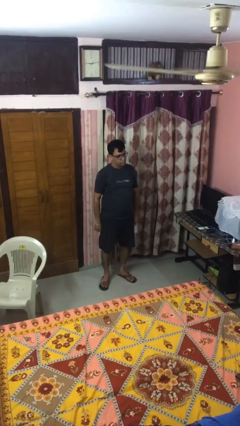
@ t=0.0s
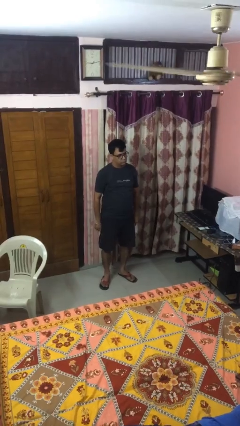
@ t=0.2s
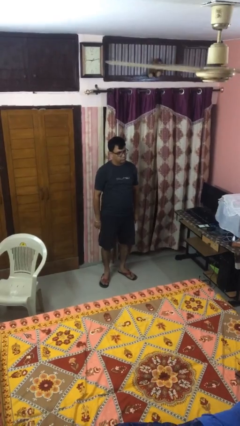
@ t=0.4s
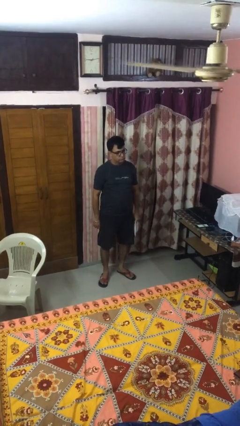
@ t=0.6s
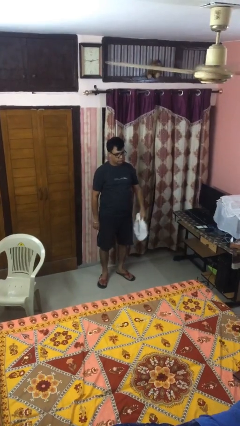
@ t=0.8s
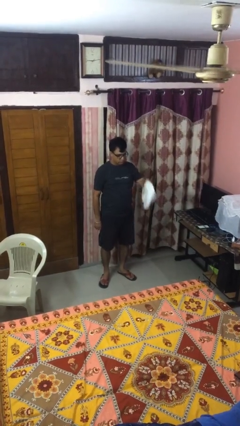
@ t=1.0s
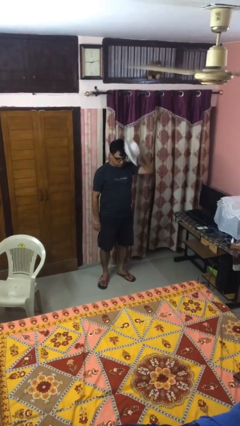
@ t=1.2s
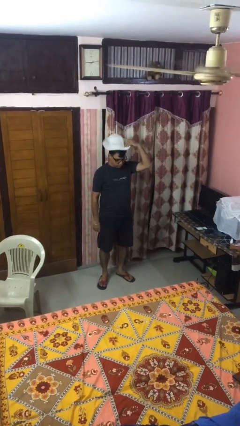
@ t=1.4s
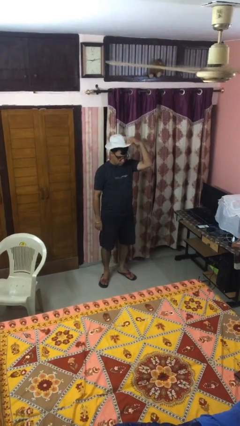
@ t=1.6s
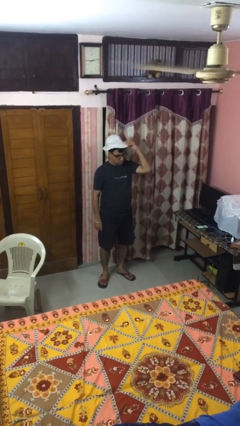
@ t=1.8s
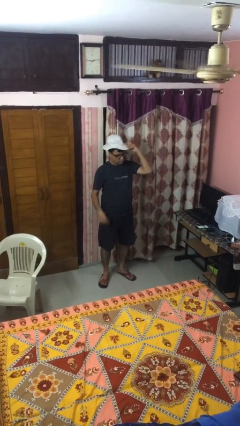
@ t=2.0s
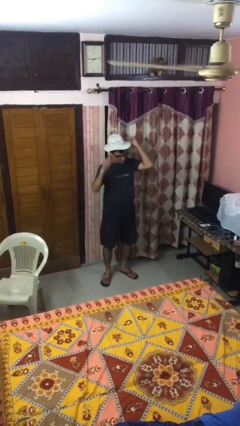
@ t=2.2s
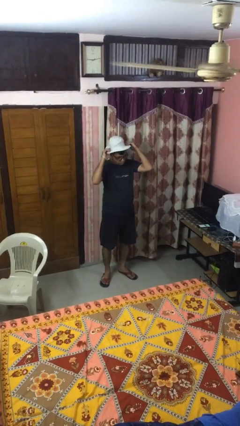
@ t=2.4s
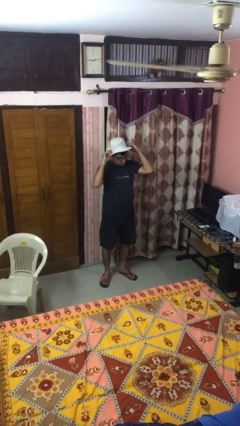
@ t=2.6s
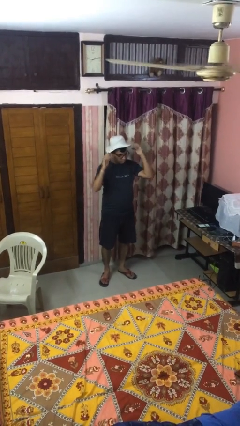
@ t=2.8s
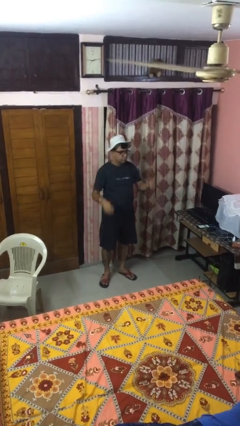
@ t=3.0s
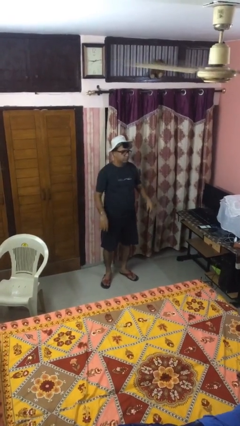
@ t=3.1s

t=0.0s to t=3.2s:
person puts on hat

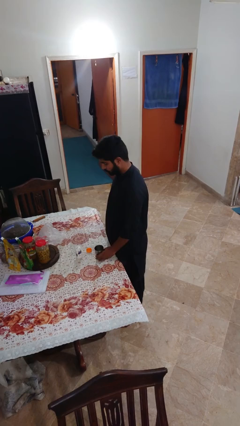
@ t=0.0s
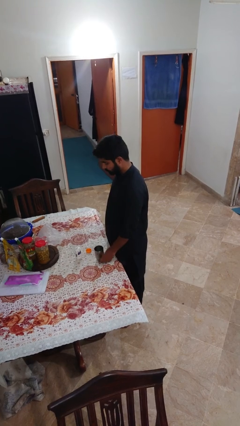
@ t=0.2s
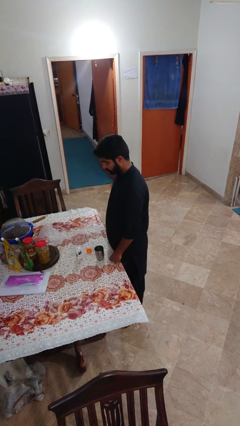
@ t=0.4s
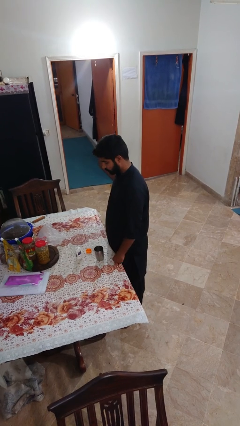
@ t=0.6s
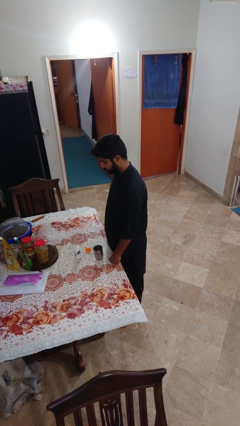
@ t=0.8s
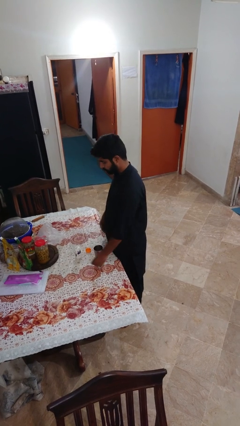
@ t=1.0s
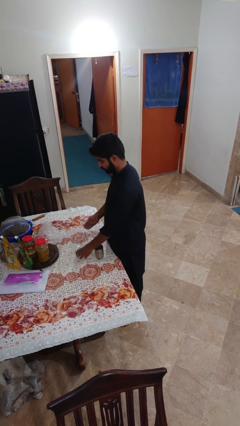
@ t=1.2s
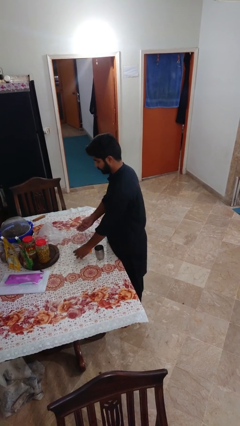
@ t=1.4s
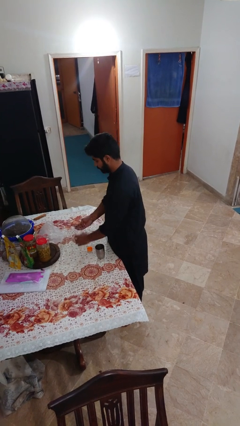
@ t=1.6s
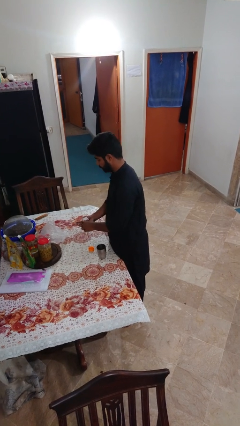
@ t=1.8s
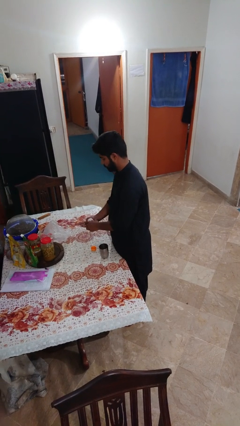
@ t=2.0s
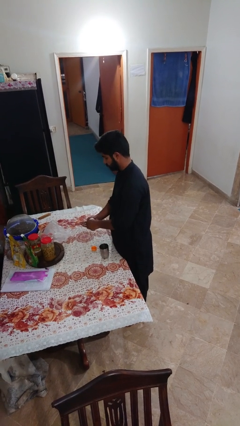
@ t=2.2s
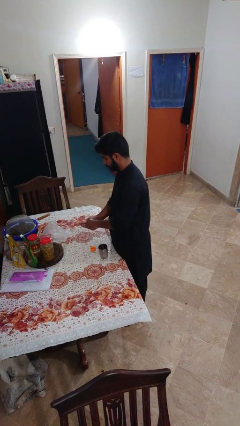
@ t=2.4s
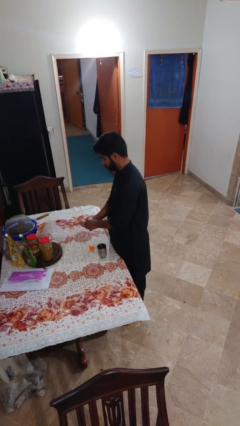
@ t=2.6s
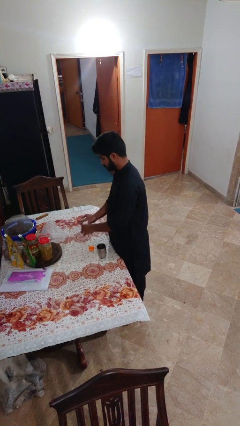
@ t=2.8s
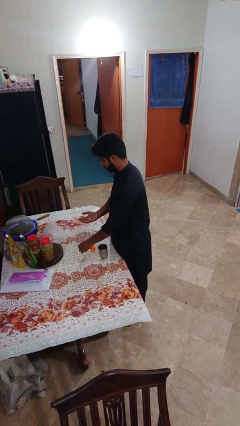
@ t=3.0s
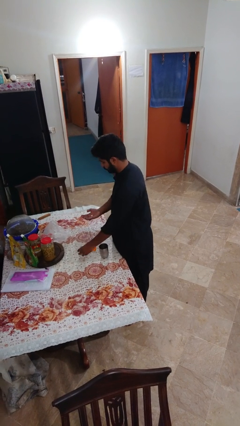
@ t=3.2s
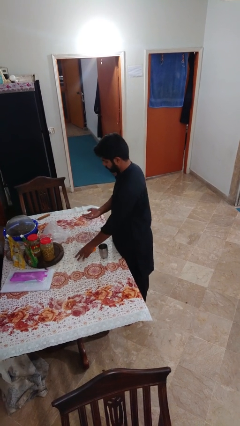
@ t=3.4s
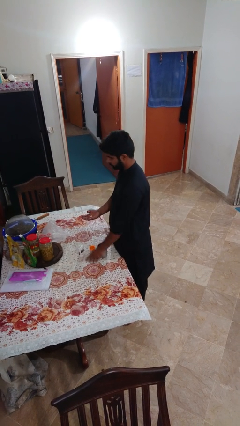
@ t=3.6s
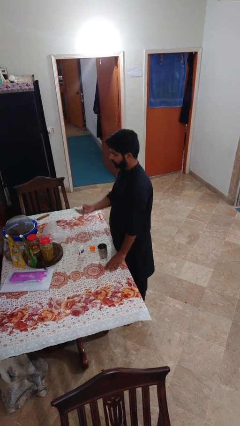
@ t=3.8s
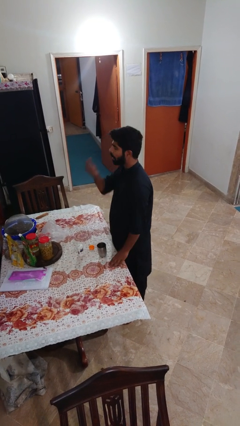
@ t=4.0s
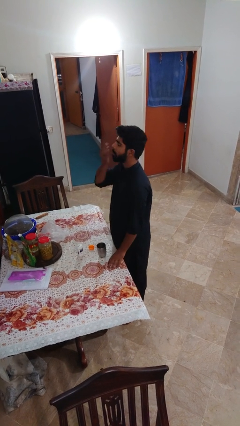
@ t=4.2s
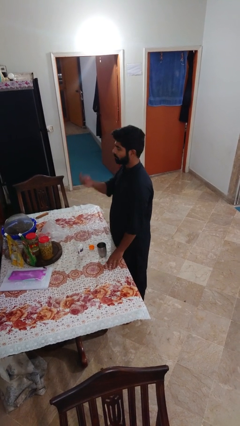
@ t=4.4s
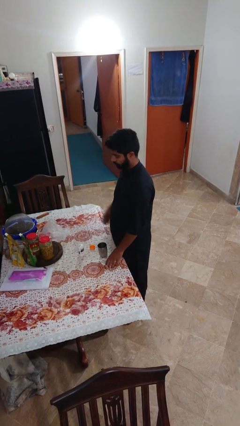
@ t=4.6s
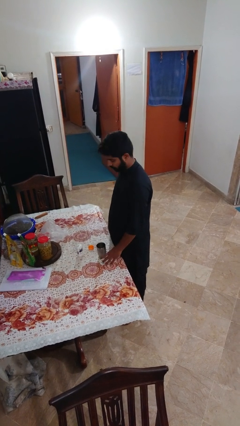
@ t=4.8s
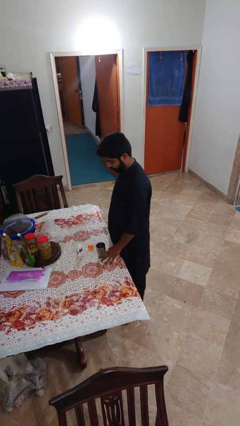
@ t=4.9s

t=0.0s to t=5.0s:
person takes medicine pills

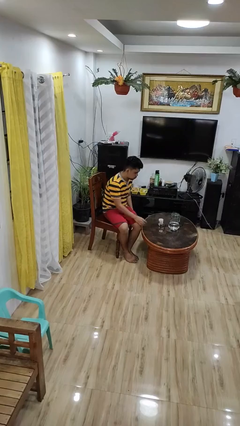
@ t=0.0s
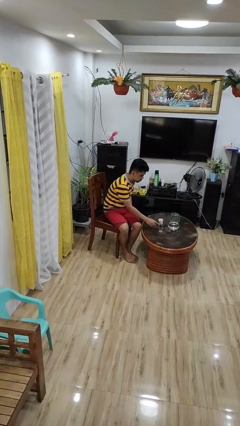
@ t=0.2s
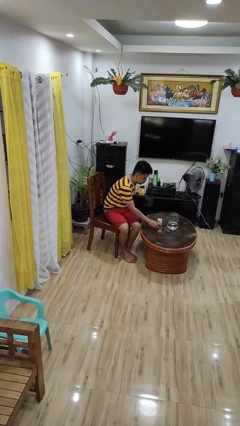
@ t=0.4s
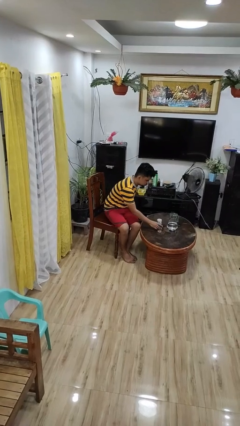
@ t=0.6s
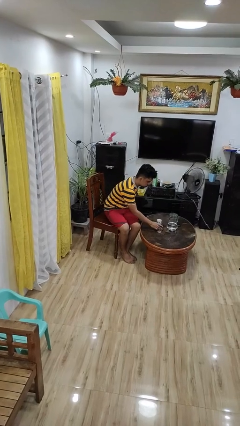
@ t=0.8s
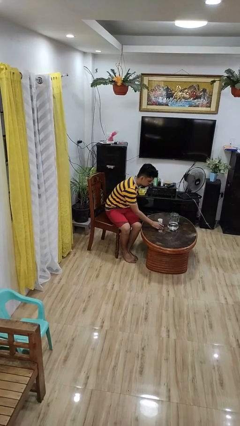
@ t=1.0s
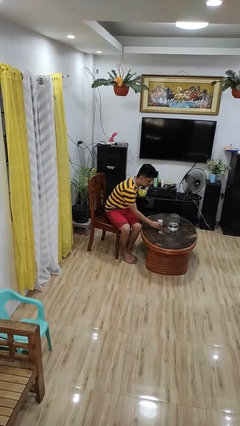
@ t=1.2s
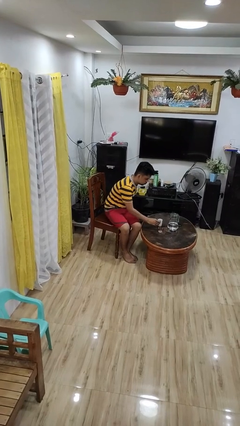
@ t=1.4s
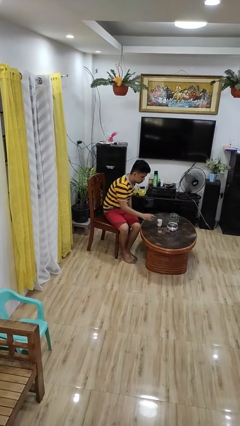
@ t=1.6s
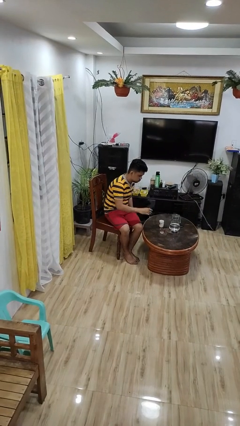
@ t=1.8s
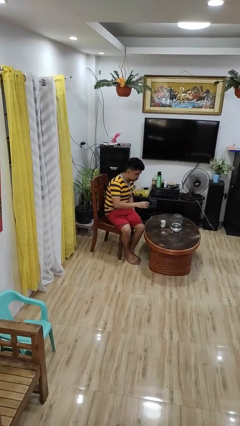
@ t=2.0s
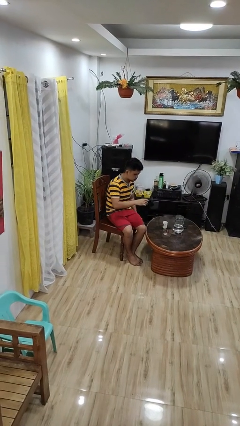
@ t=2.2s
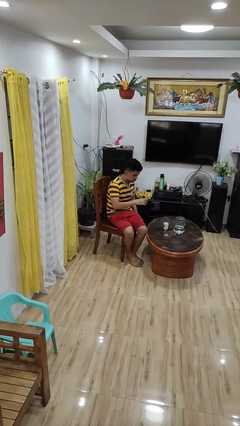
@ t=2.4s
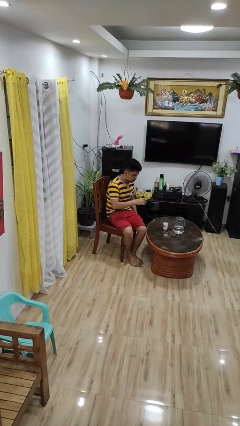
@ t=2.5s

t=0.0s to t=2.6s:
person picks up object from table

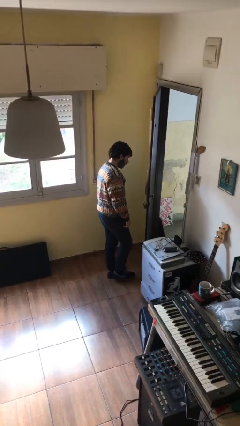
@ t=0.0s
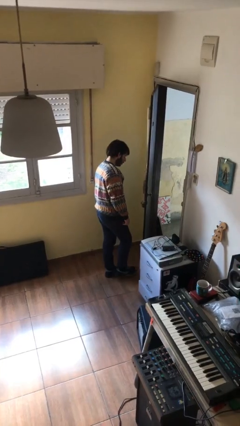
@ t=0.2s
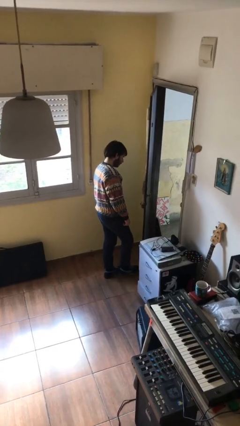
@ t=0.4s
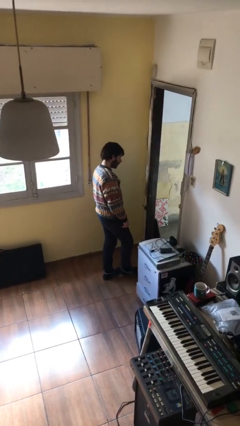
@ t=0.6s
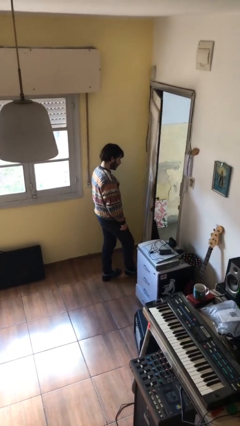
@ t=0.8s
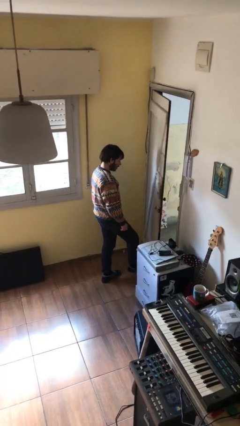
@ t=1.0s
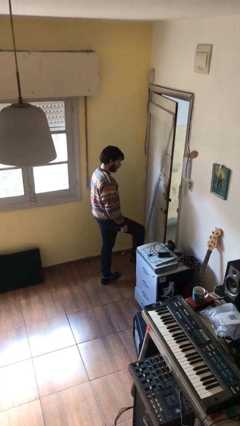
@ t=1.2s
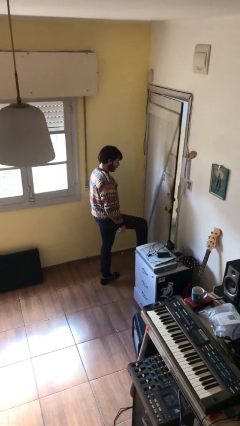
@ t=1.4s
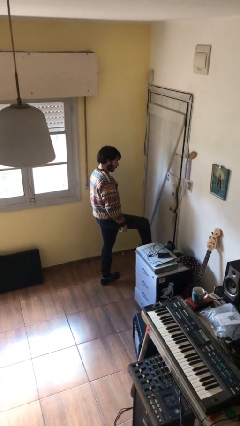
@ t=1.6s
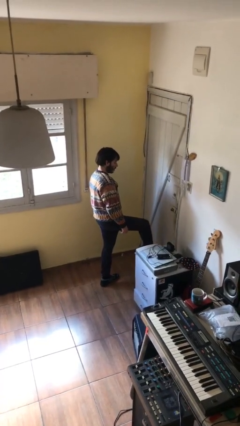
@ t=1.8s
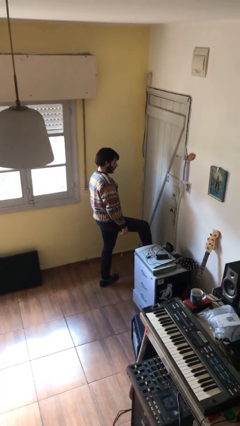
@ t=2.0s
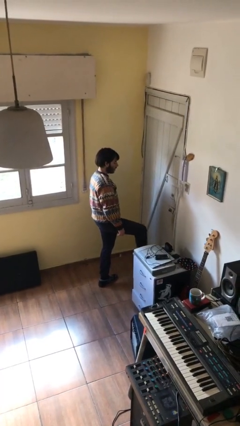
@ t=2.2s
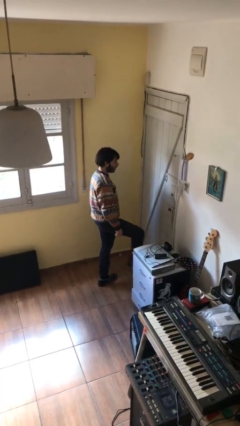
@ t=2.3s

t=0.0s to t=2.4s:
person closes door with foot

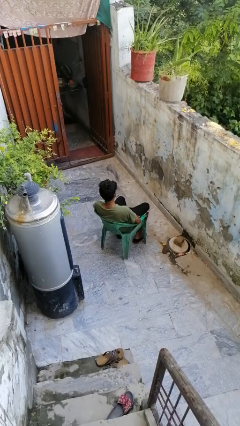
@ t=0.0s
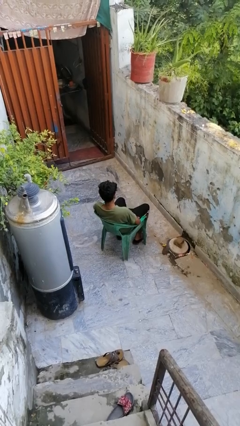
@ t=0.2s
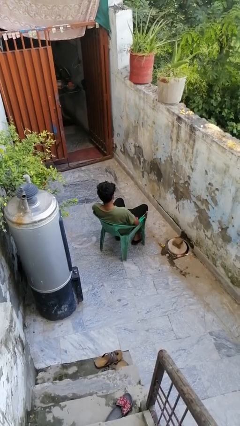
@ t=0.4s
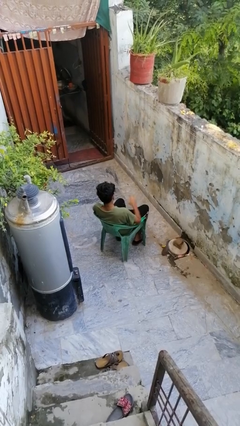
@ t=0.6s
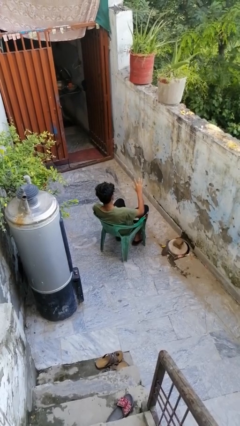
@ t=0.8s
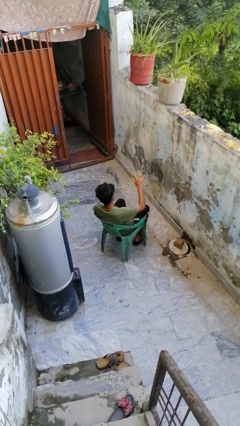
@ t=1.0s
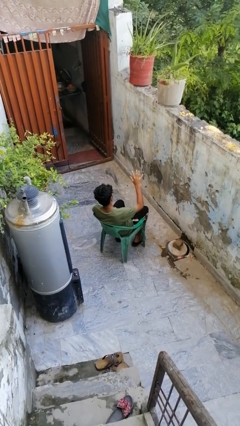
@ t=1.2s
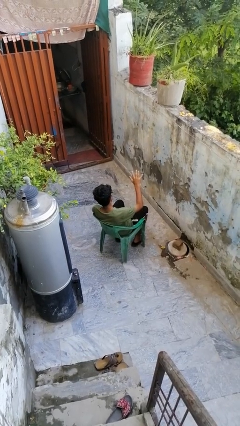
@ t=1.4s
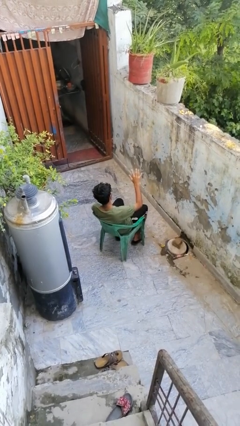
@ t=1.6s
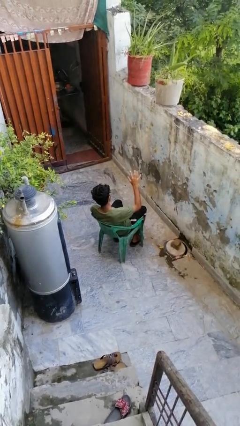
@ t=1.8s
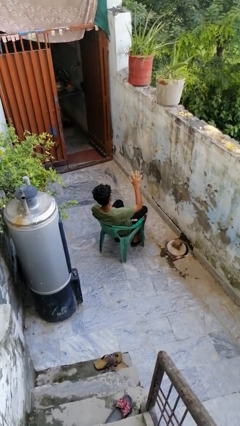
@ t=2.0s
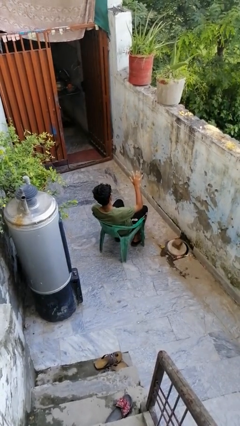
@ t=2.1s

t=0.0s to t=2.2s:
person gestures number five

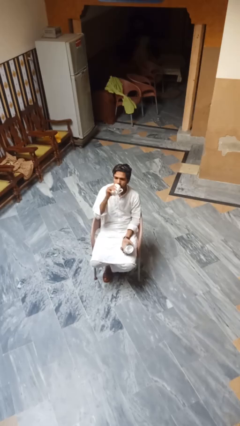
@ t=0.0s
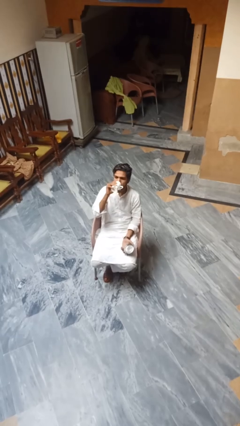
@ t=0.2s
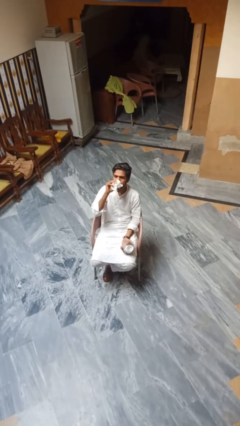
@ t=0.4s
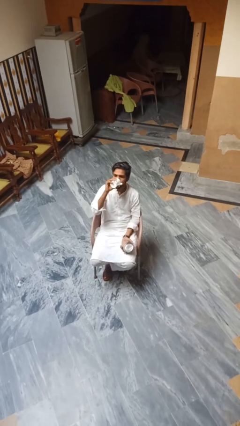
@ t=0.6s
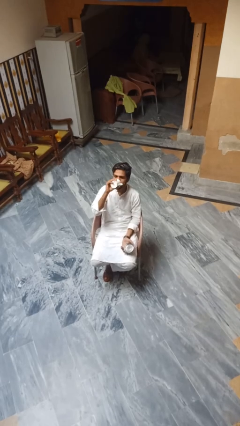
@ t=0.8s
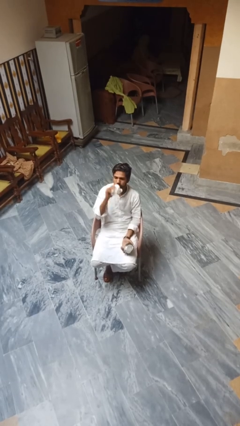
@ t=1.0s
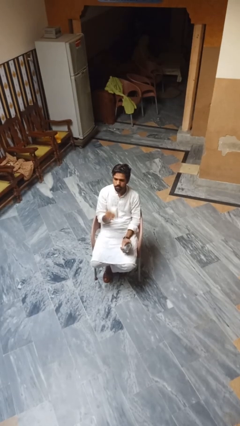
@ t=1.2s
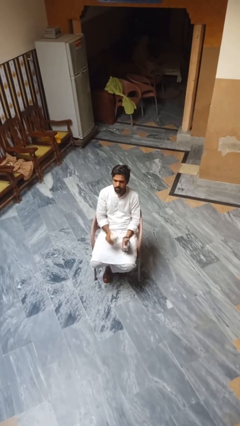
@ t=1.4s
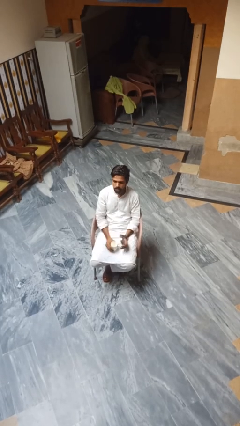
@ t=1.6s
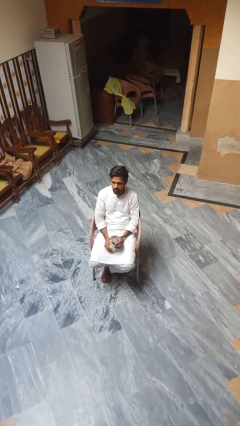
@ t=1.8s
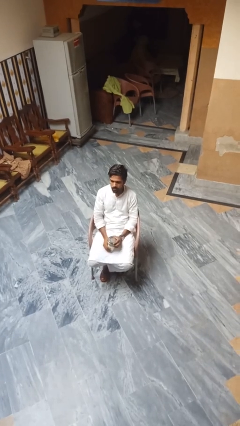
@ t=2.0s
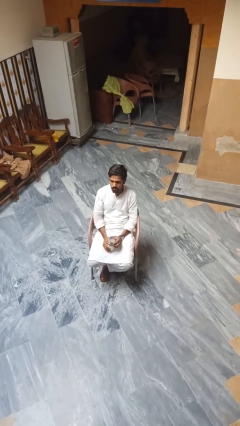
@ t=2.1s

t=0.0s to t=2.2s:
person drinks from beverage can
